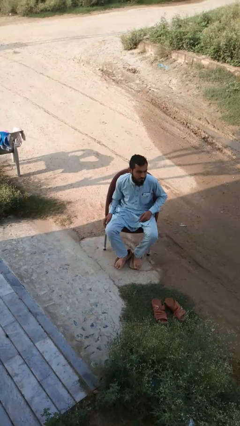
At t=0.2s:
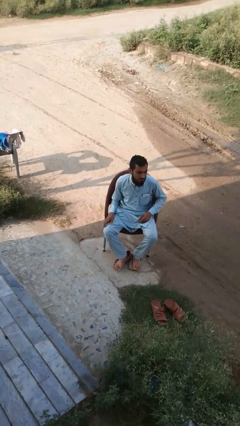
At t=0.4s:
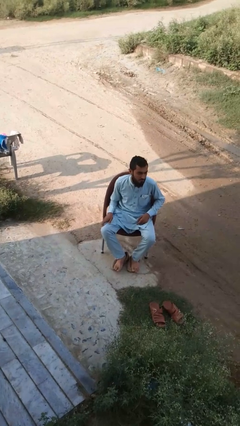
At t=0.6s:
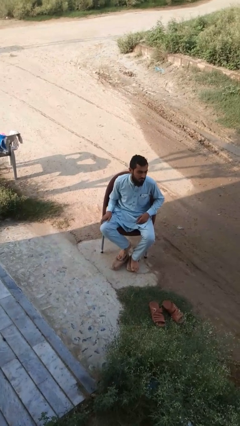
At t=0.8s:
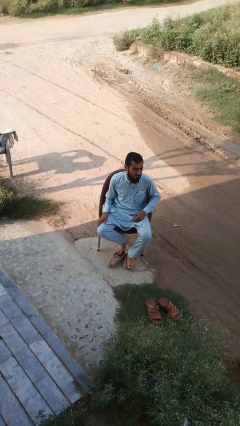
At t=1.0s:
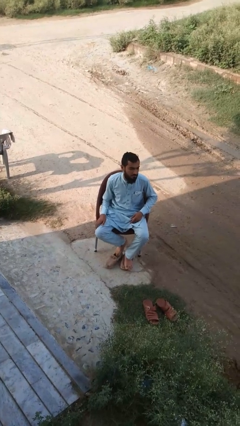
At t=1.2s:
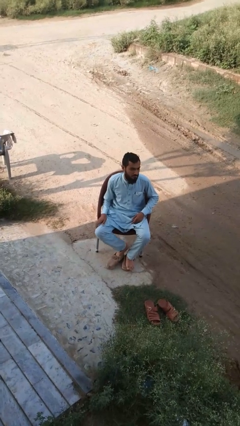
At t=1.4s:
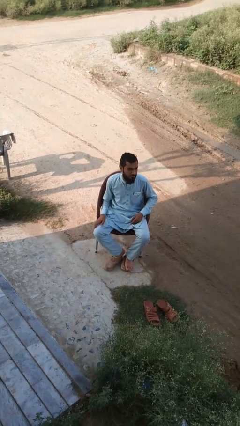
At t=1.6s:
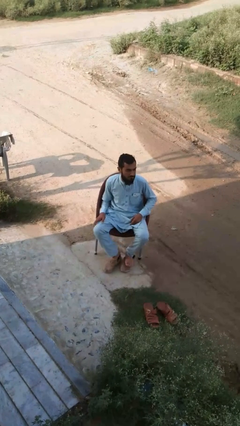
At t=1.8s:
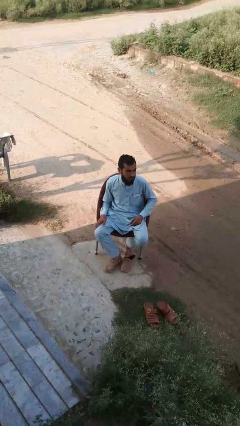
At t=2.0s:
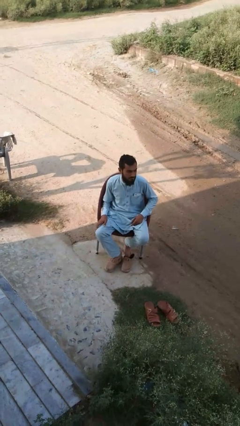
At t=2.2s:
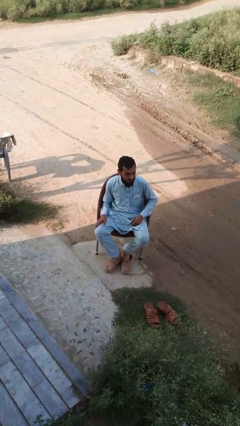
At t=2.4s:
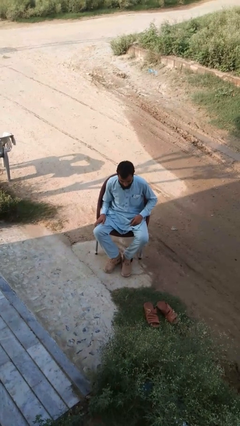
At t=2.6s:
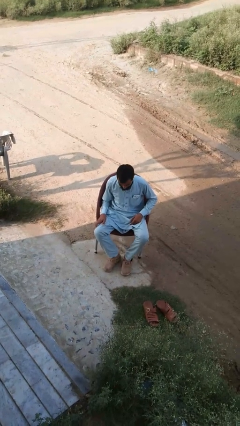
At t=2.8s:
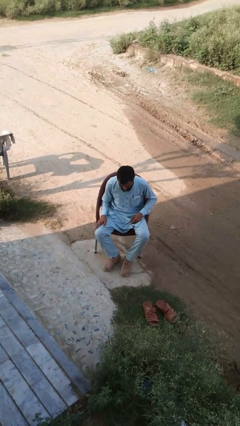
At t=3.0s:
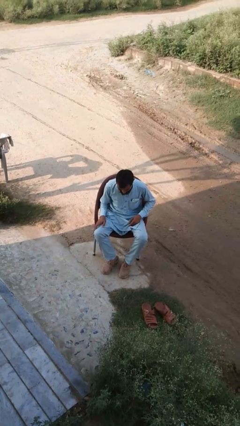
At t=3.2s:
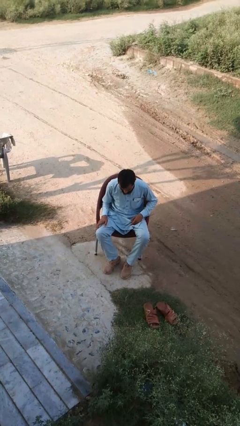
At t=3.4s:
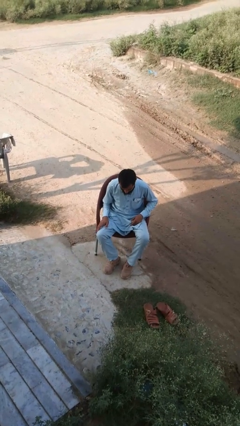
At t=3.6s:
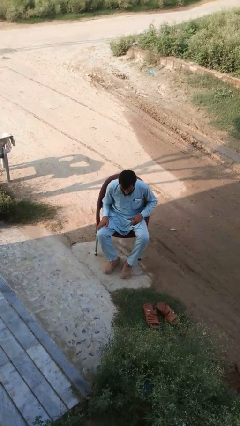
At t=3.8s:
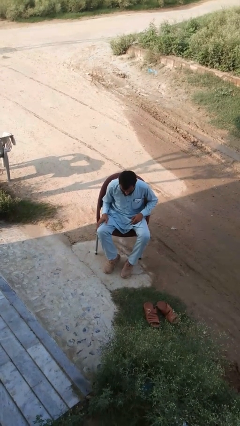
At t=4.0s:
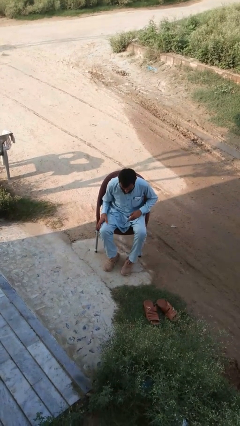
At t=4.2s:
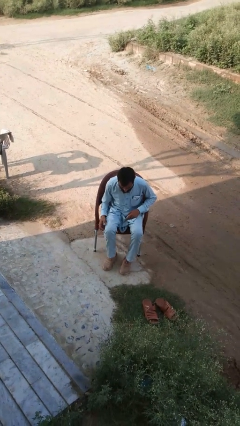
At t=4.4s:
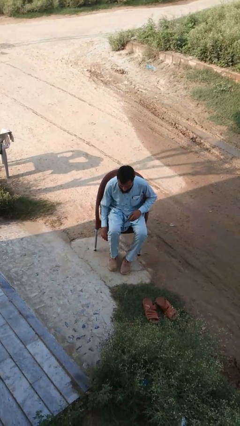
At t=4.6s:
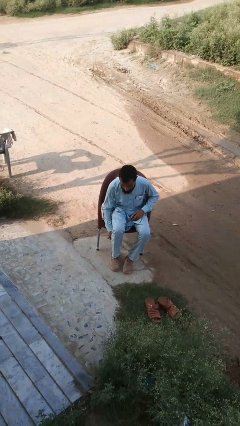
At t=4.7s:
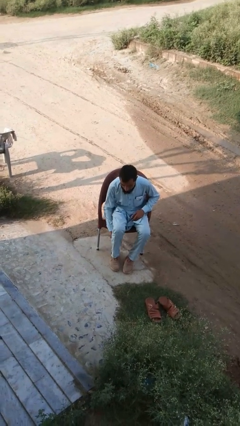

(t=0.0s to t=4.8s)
person puts on shoes

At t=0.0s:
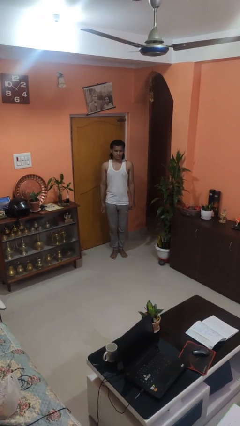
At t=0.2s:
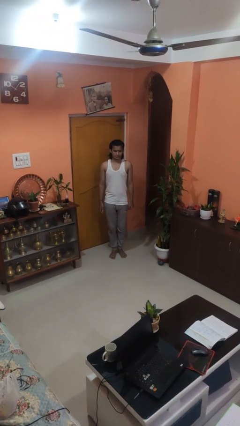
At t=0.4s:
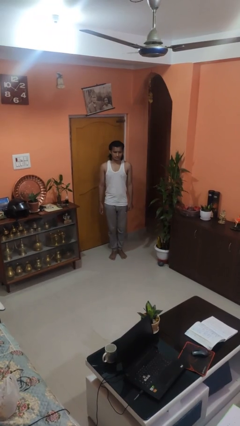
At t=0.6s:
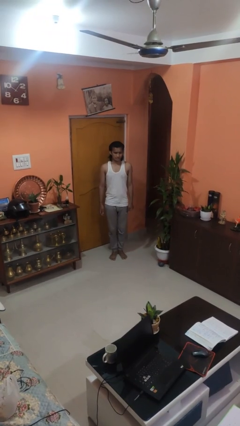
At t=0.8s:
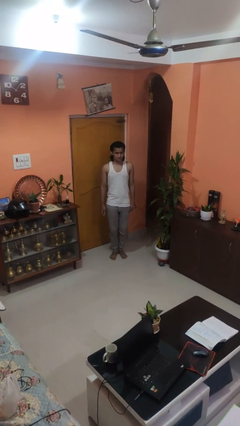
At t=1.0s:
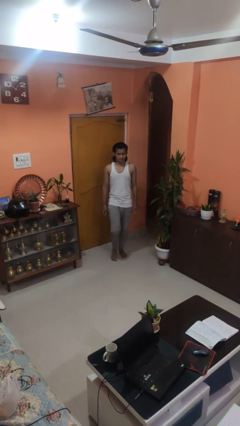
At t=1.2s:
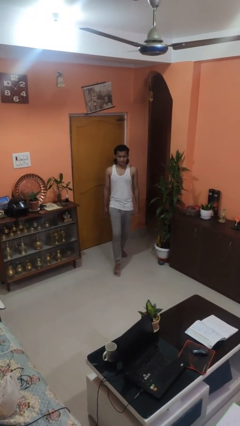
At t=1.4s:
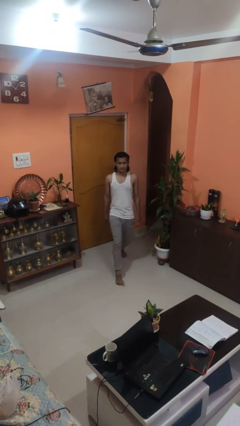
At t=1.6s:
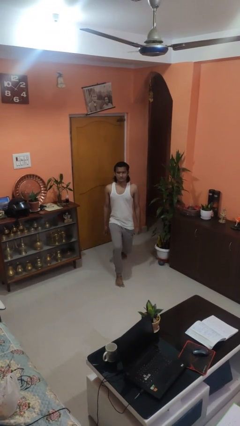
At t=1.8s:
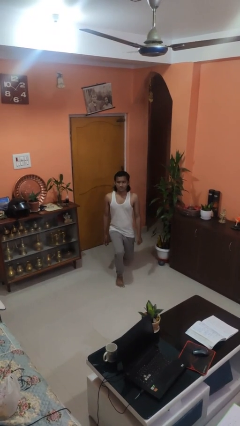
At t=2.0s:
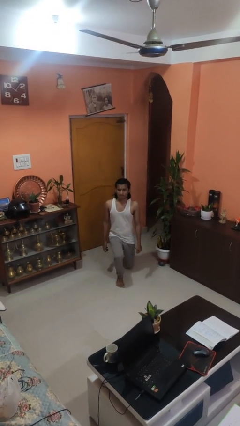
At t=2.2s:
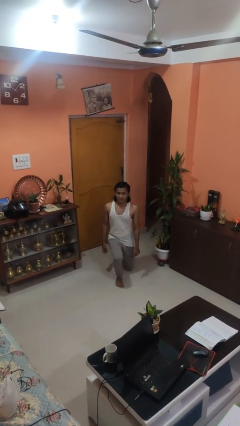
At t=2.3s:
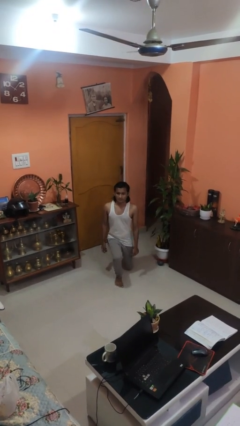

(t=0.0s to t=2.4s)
person kneels

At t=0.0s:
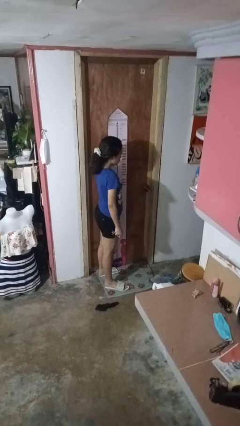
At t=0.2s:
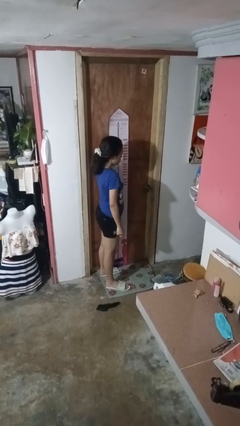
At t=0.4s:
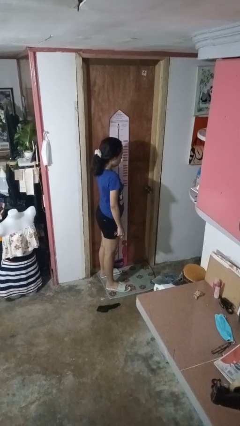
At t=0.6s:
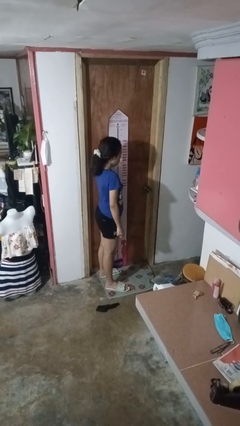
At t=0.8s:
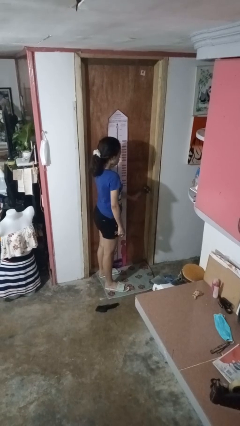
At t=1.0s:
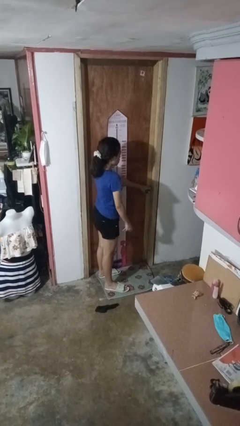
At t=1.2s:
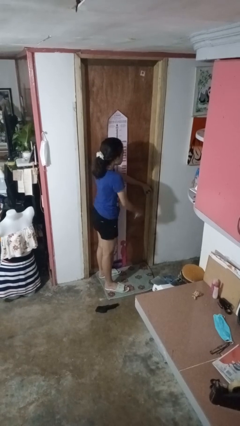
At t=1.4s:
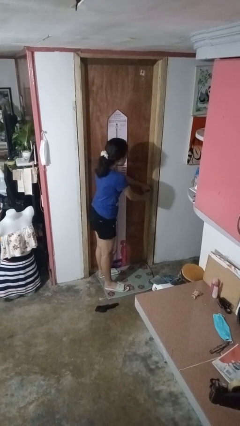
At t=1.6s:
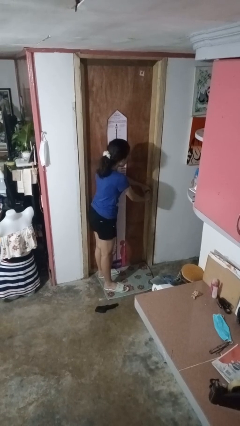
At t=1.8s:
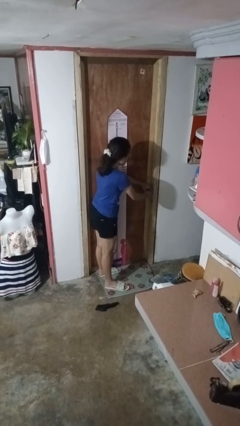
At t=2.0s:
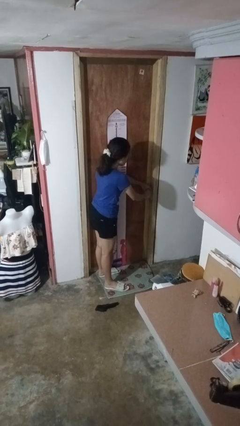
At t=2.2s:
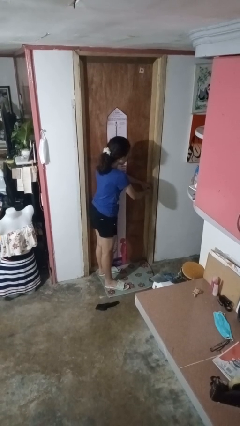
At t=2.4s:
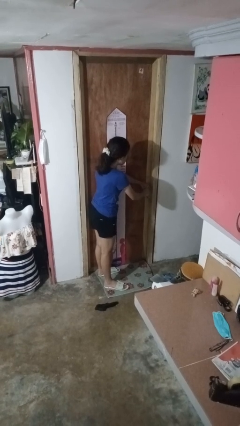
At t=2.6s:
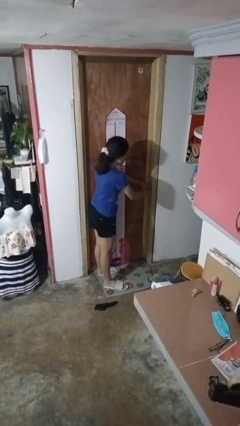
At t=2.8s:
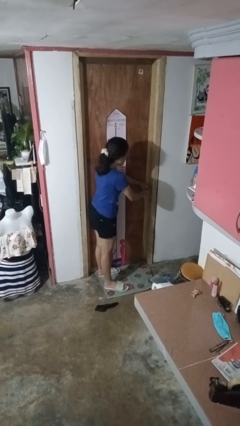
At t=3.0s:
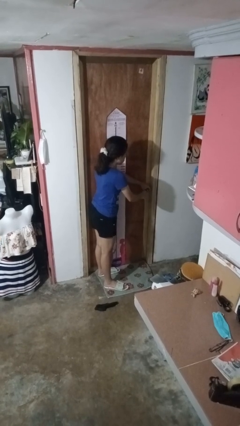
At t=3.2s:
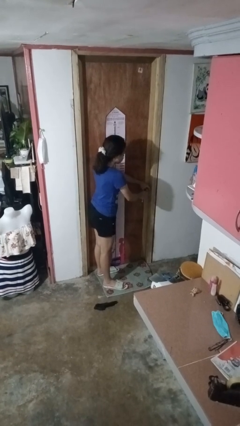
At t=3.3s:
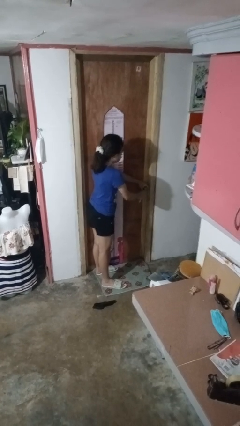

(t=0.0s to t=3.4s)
person unlocks door with keys

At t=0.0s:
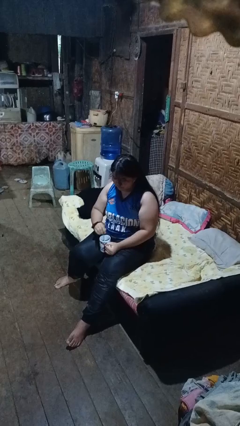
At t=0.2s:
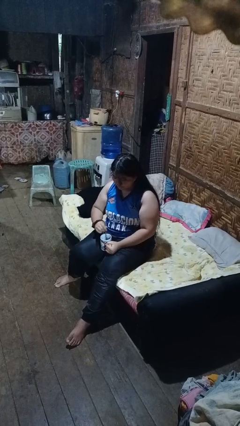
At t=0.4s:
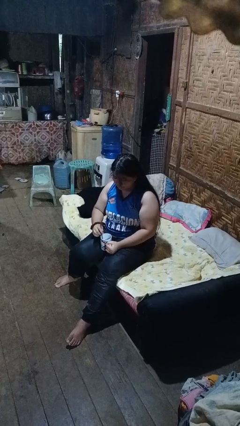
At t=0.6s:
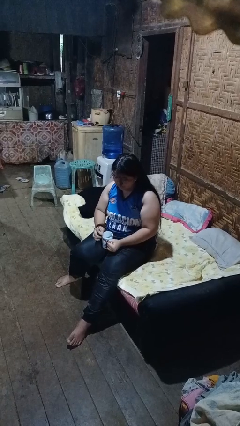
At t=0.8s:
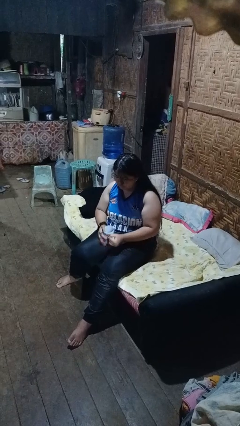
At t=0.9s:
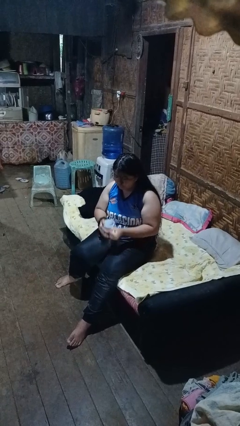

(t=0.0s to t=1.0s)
person stirs mug

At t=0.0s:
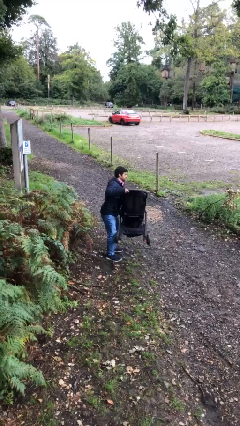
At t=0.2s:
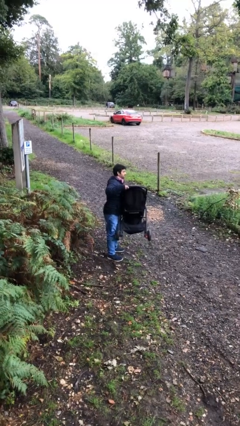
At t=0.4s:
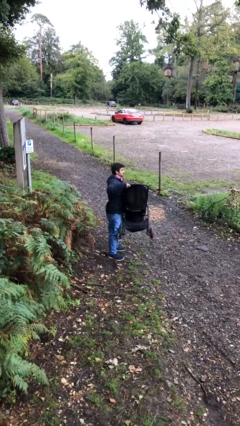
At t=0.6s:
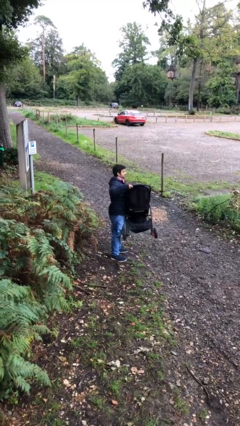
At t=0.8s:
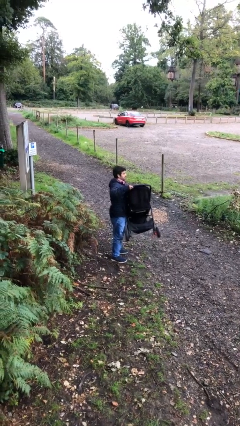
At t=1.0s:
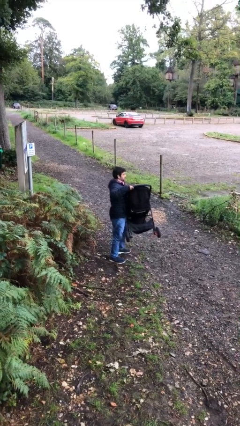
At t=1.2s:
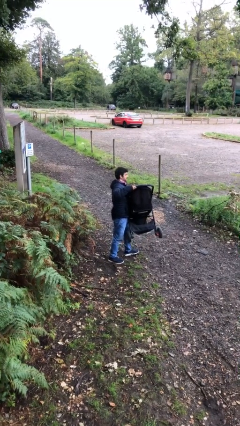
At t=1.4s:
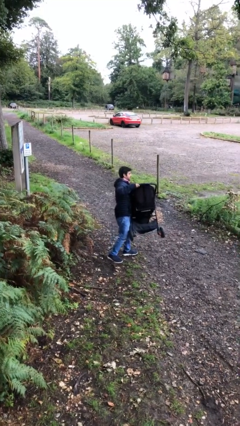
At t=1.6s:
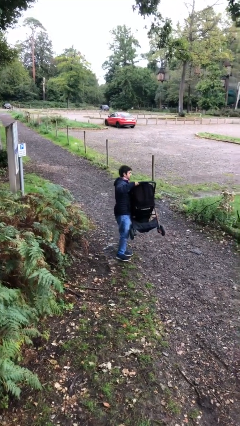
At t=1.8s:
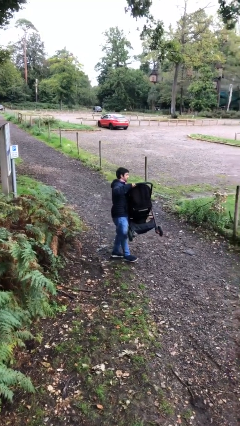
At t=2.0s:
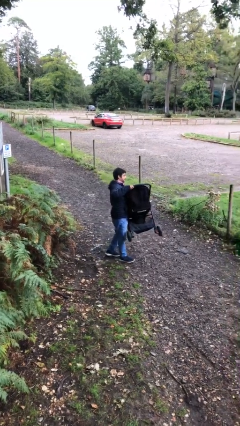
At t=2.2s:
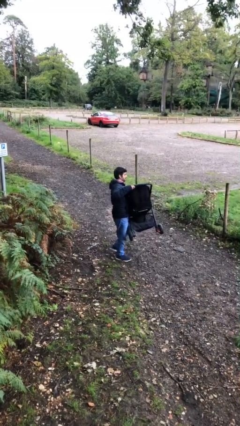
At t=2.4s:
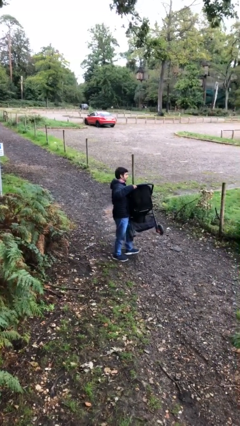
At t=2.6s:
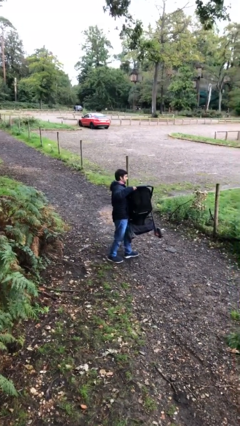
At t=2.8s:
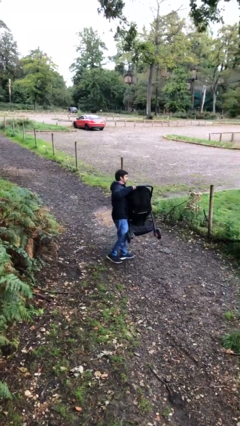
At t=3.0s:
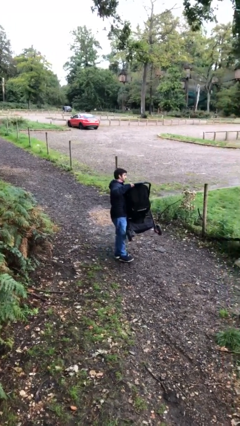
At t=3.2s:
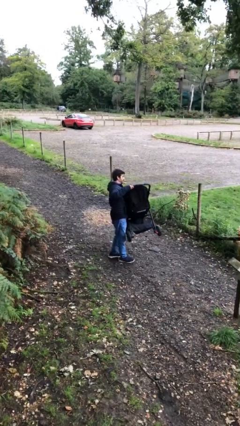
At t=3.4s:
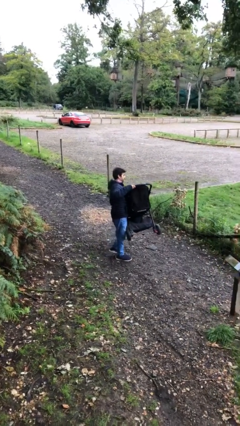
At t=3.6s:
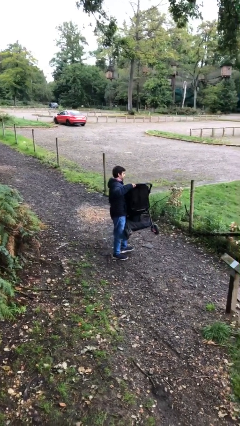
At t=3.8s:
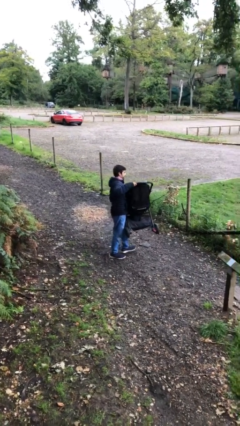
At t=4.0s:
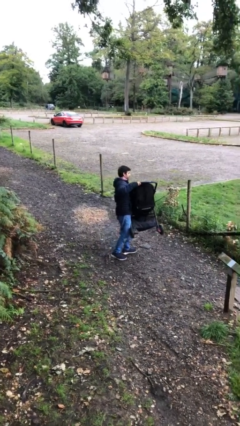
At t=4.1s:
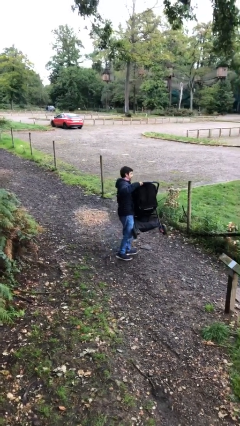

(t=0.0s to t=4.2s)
person carries heavy object

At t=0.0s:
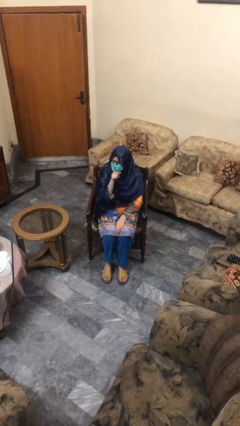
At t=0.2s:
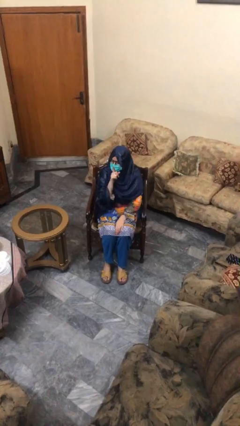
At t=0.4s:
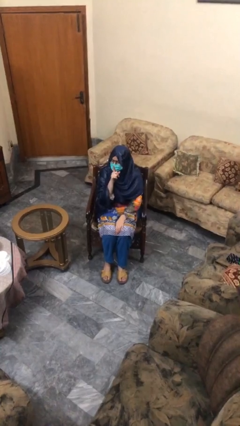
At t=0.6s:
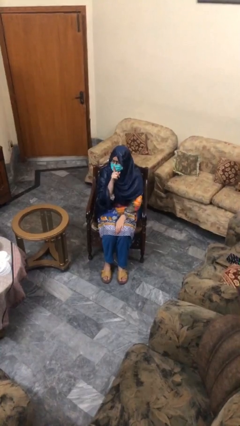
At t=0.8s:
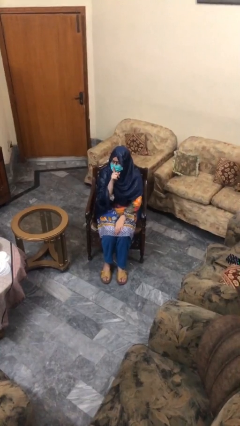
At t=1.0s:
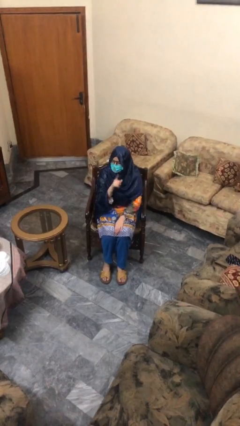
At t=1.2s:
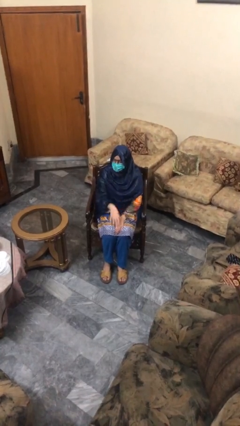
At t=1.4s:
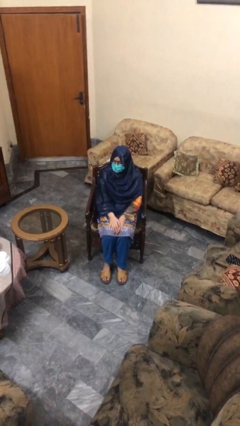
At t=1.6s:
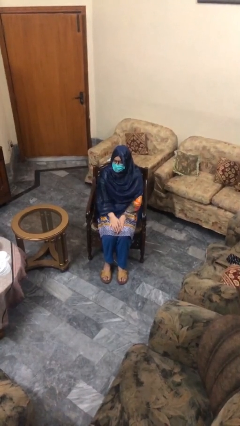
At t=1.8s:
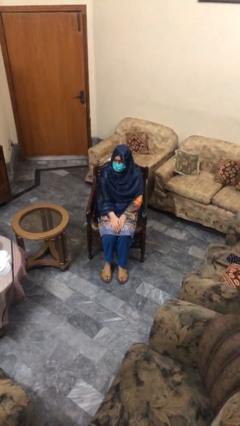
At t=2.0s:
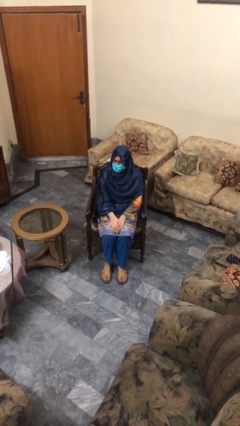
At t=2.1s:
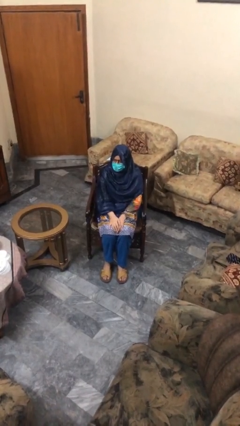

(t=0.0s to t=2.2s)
person gestures be quiet
